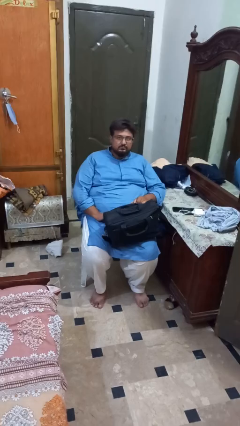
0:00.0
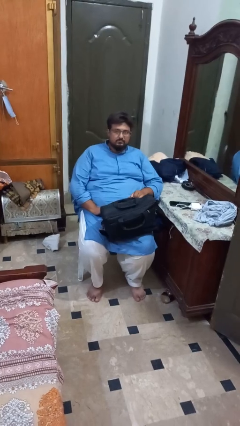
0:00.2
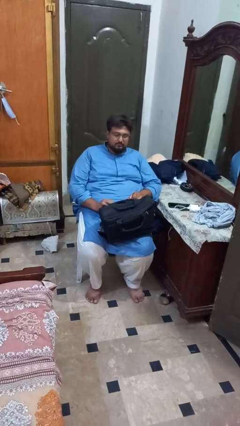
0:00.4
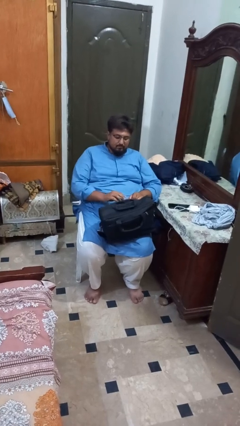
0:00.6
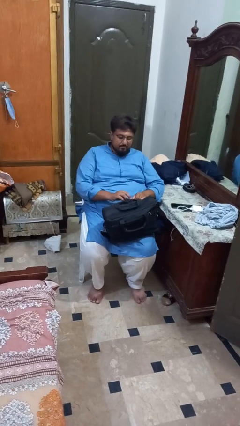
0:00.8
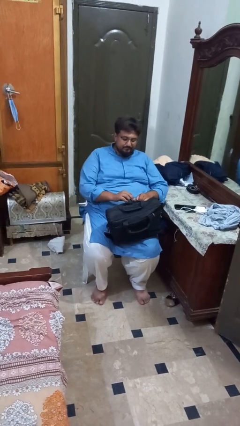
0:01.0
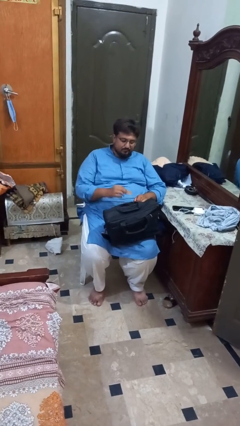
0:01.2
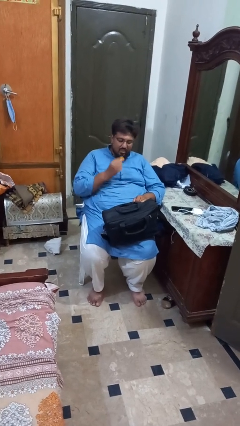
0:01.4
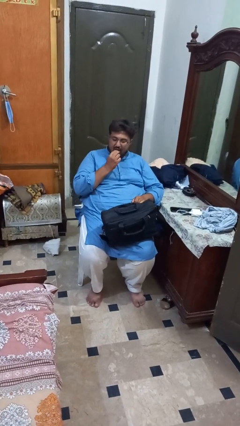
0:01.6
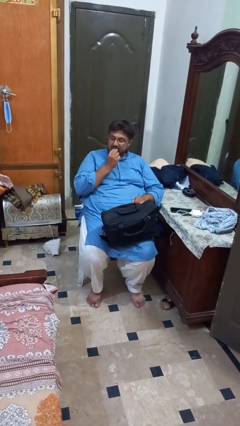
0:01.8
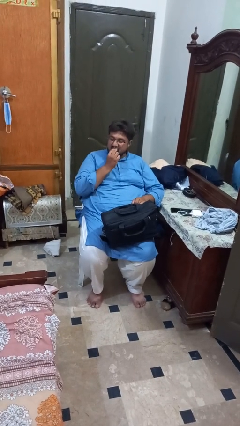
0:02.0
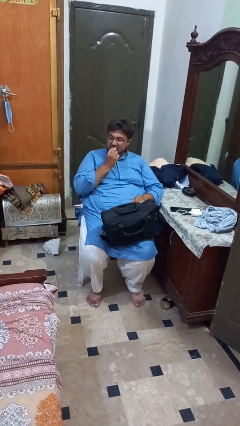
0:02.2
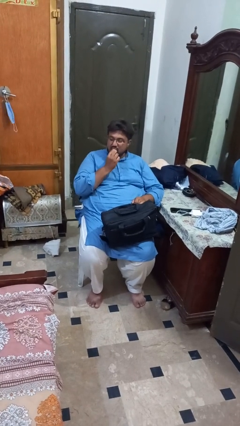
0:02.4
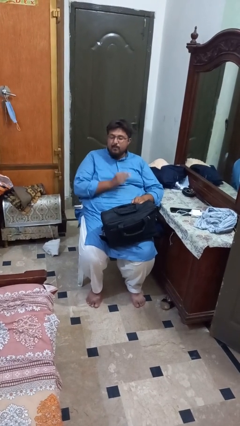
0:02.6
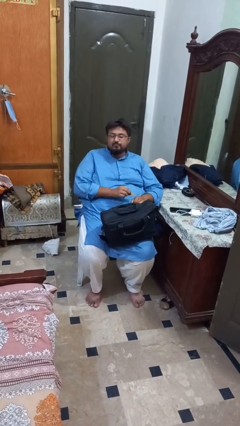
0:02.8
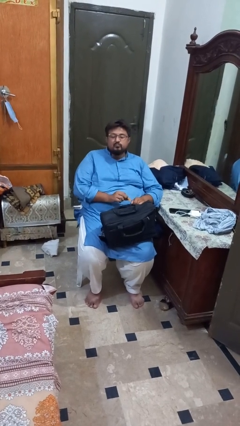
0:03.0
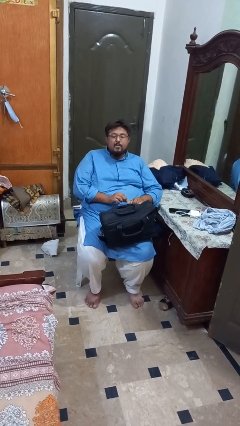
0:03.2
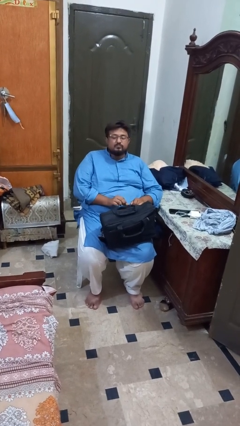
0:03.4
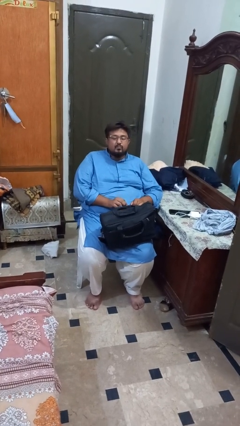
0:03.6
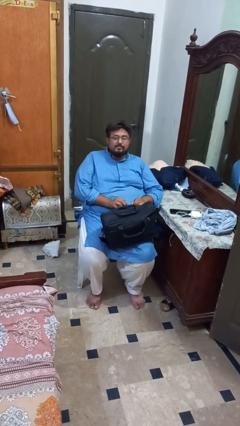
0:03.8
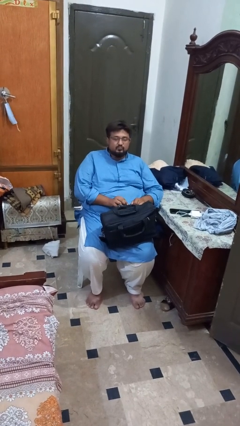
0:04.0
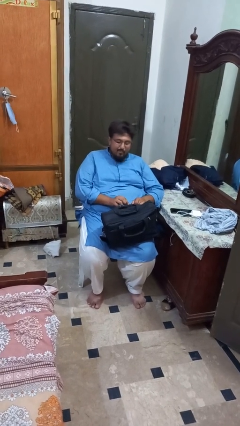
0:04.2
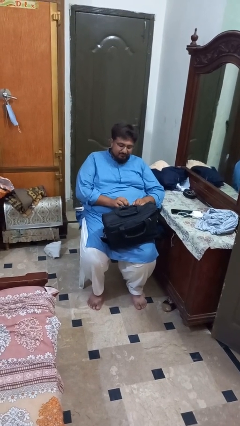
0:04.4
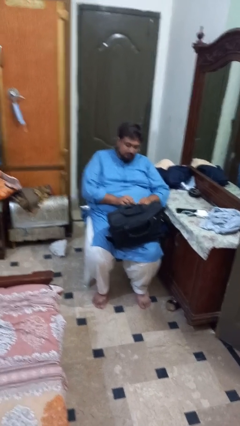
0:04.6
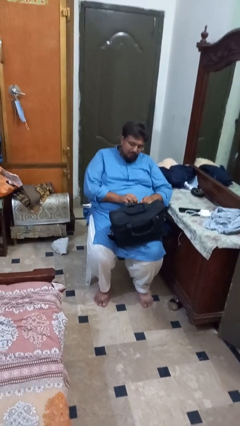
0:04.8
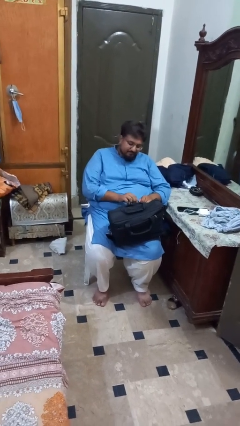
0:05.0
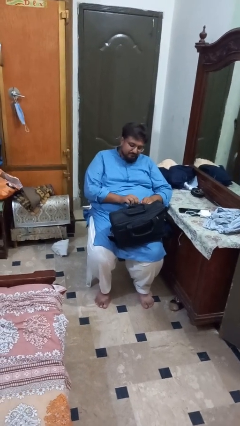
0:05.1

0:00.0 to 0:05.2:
person eats snack from bag

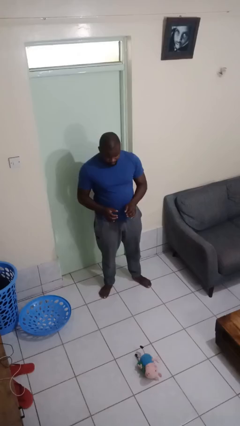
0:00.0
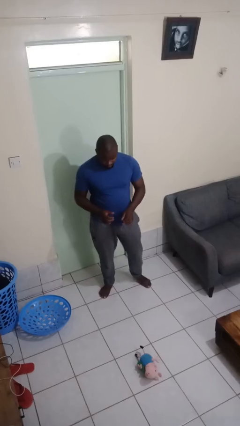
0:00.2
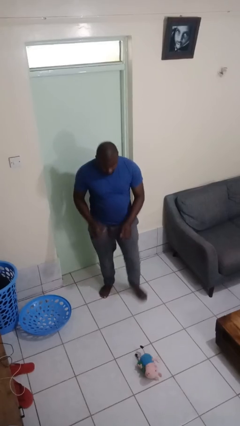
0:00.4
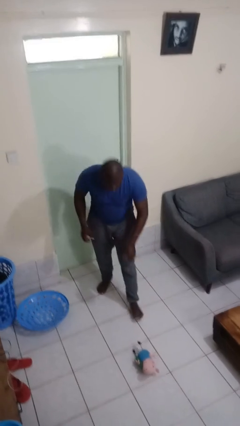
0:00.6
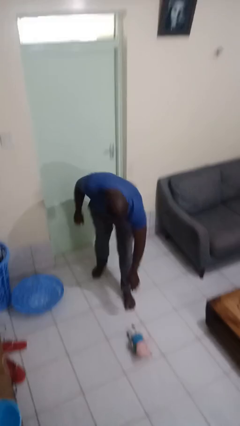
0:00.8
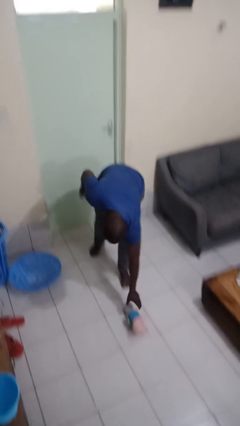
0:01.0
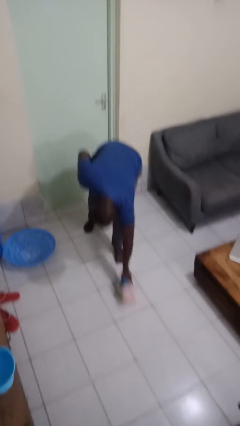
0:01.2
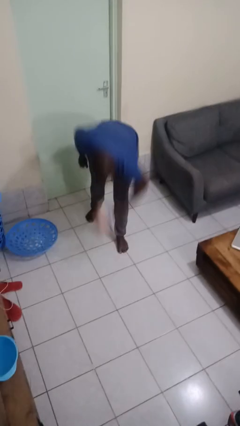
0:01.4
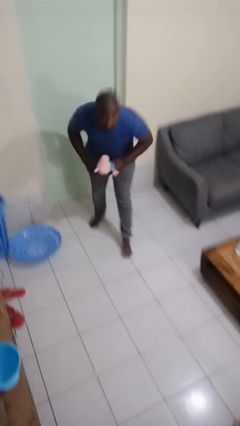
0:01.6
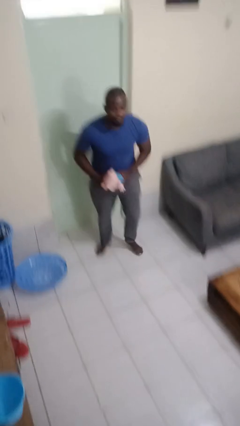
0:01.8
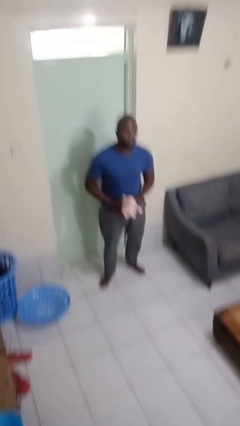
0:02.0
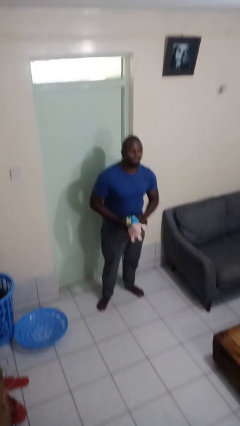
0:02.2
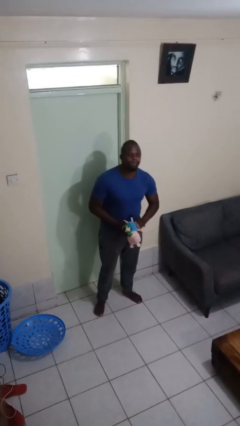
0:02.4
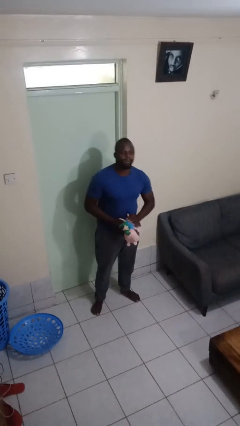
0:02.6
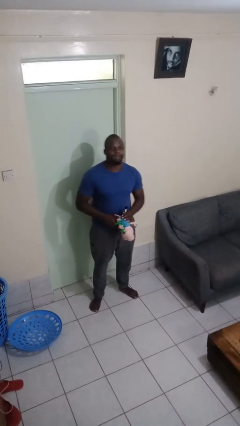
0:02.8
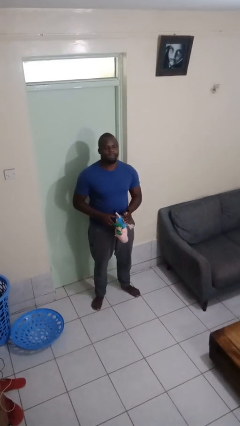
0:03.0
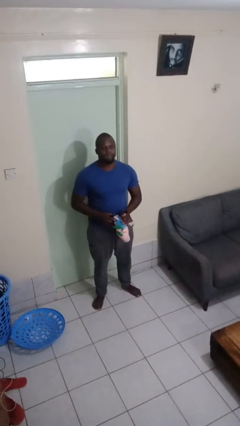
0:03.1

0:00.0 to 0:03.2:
person picks up object from floor

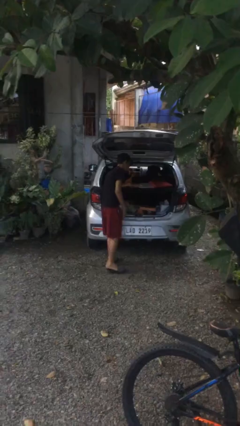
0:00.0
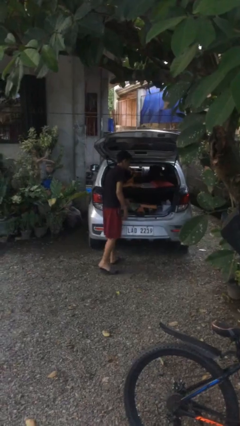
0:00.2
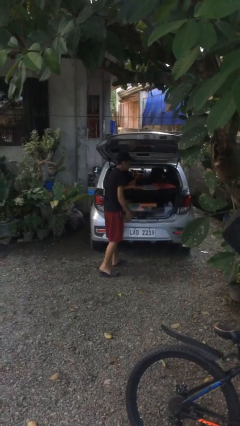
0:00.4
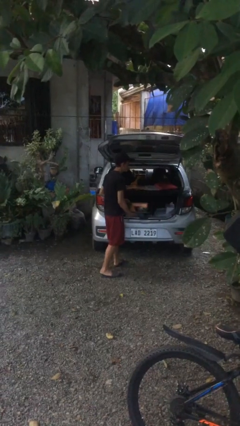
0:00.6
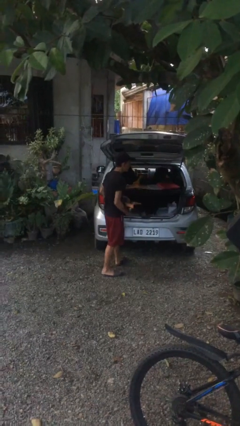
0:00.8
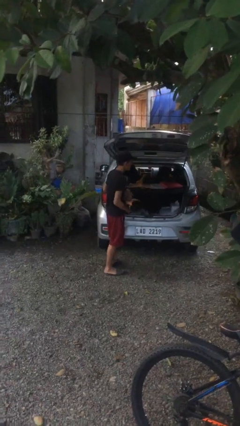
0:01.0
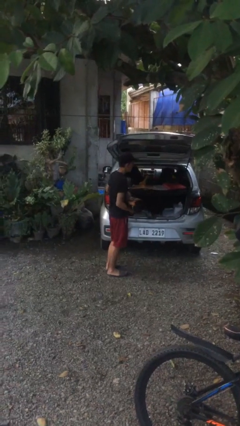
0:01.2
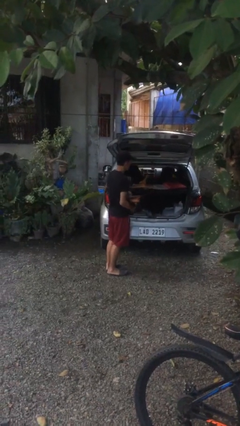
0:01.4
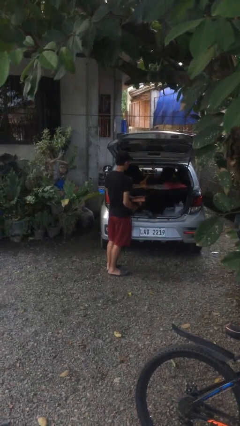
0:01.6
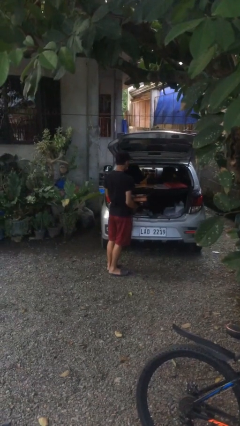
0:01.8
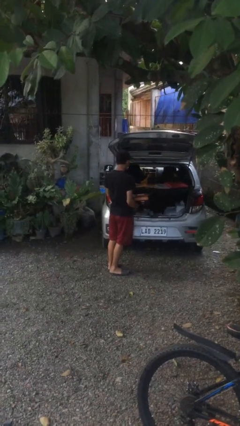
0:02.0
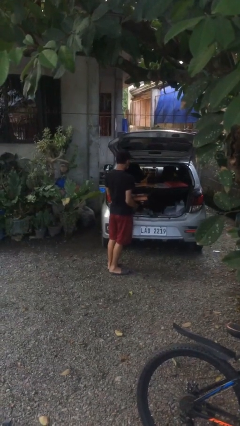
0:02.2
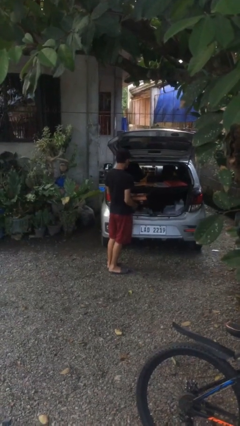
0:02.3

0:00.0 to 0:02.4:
person unloads car

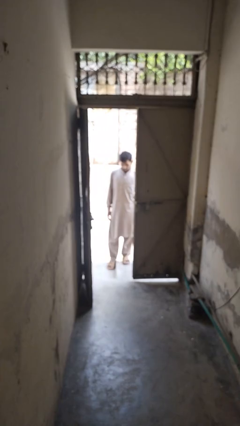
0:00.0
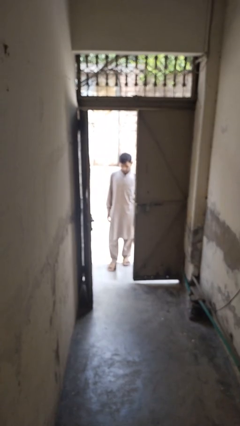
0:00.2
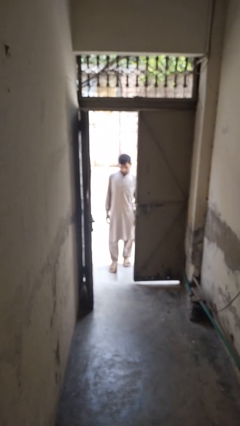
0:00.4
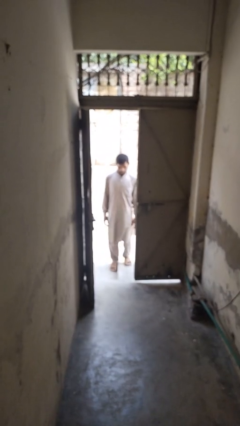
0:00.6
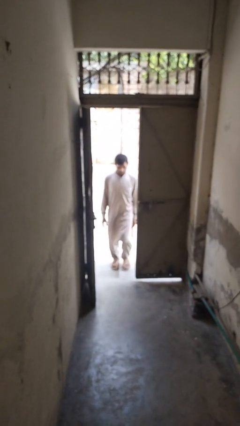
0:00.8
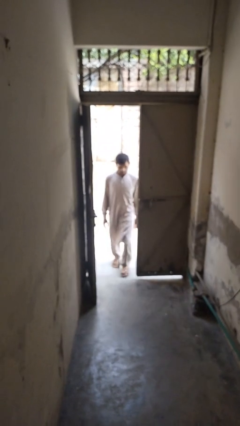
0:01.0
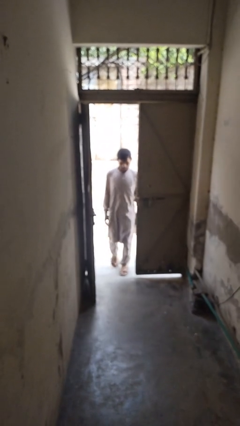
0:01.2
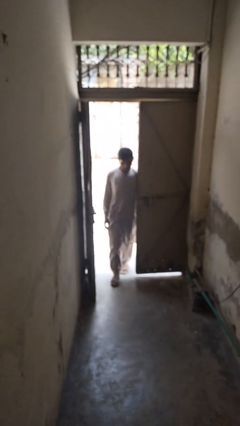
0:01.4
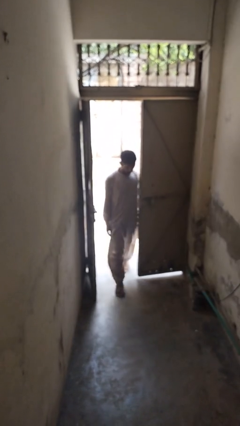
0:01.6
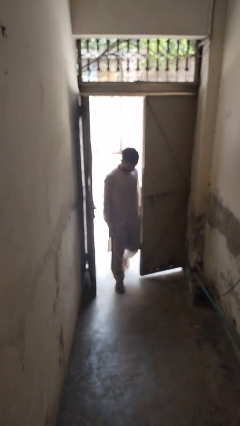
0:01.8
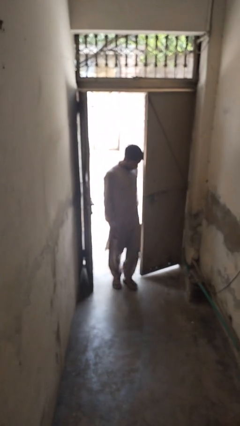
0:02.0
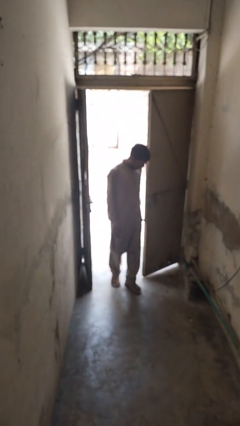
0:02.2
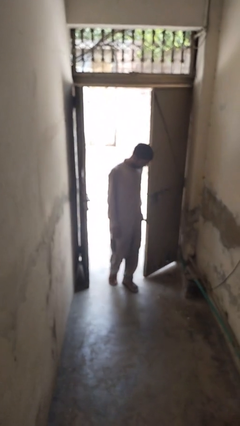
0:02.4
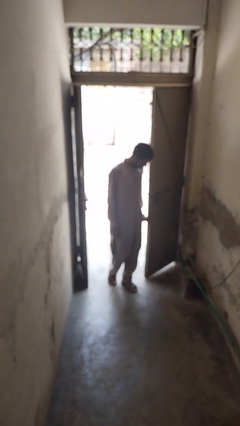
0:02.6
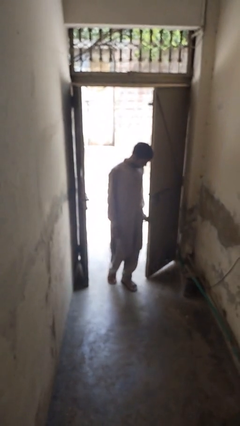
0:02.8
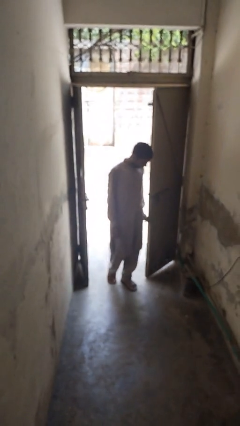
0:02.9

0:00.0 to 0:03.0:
person bumps into wall

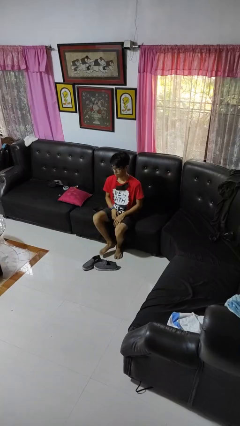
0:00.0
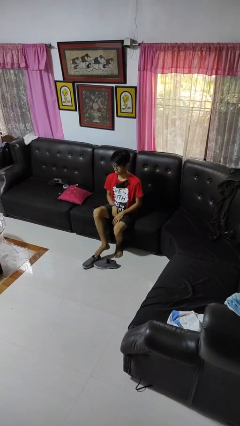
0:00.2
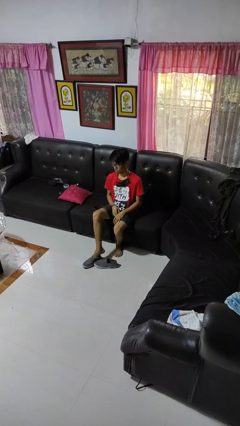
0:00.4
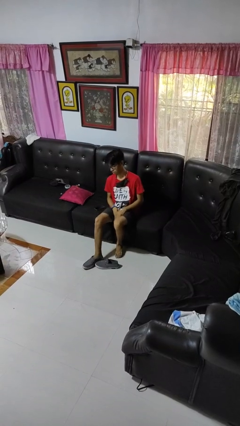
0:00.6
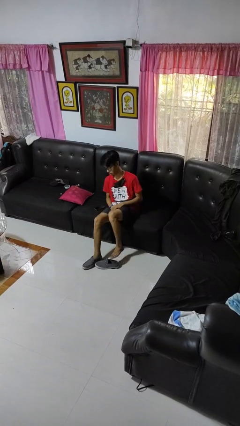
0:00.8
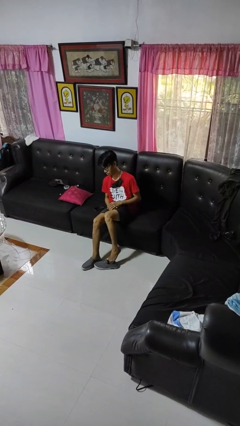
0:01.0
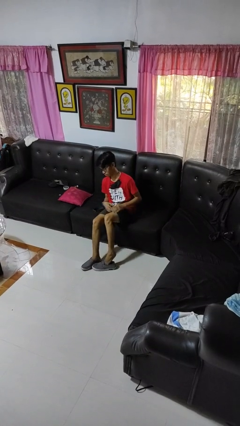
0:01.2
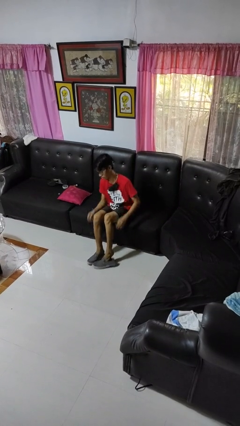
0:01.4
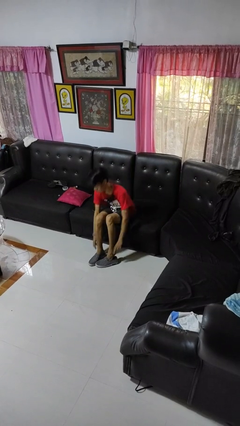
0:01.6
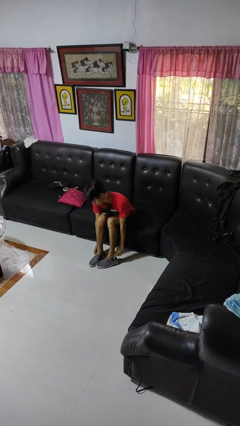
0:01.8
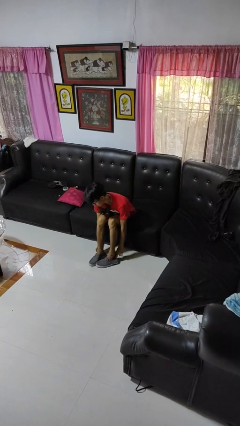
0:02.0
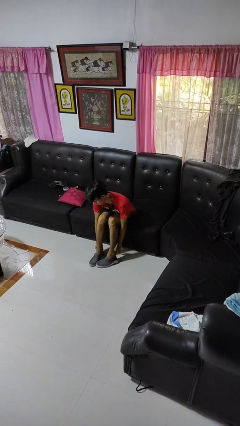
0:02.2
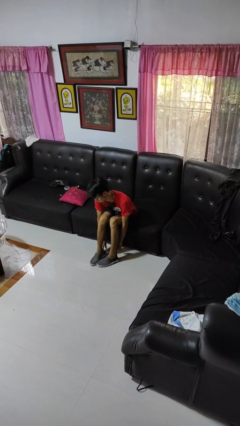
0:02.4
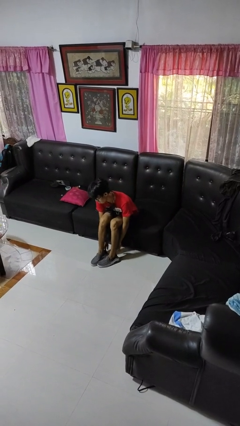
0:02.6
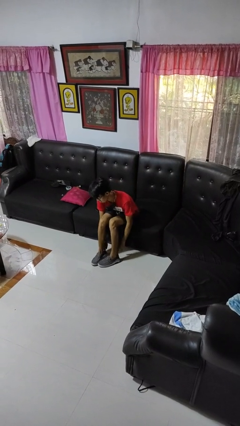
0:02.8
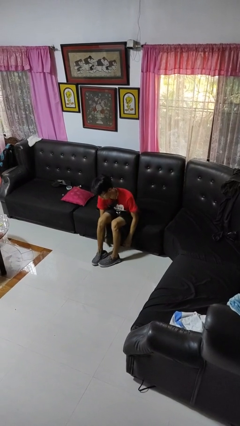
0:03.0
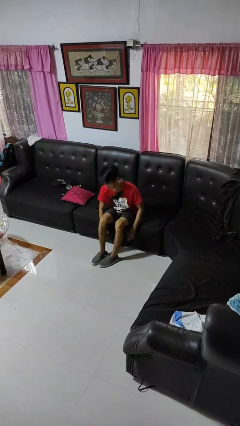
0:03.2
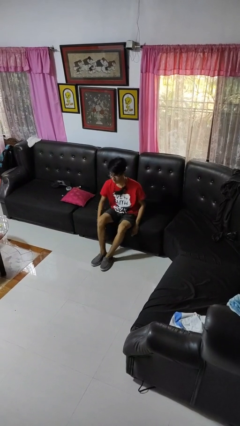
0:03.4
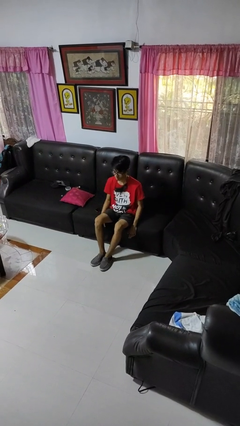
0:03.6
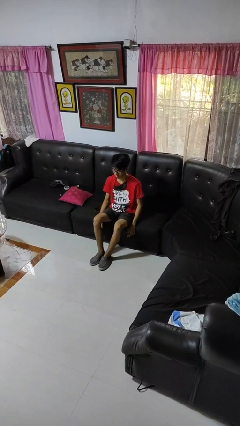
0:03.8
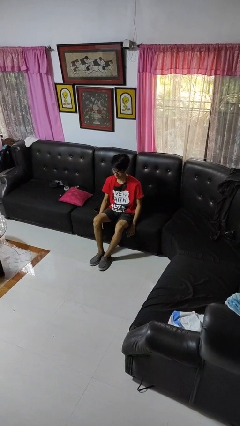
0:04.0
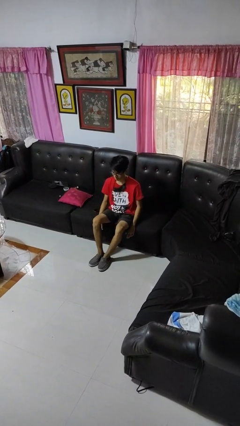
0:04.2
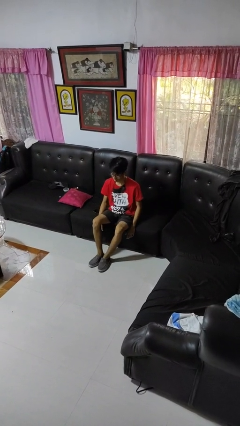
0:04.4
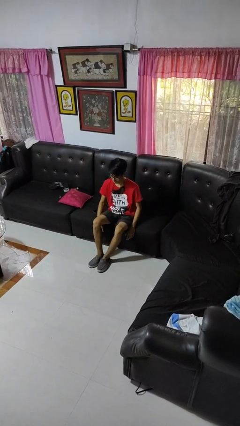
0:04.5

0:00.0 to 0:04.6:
person puts on shoes
